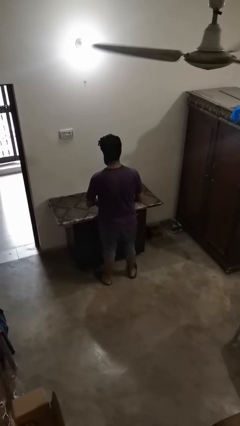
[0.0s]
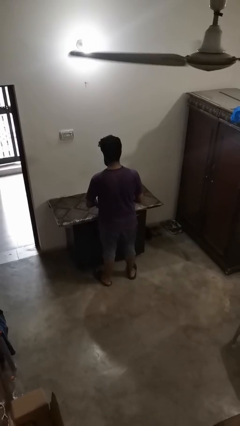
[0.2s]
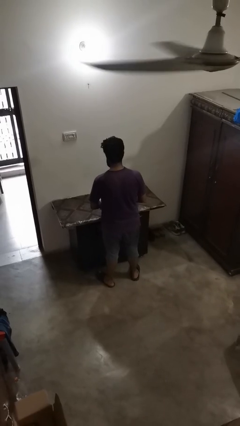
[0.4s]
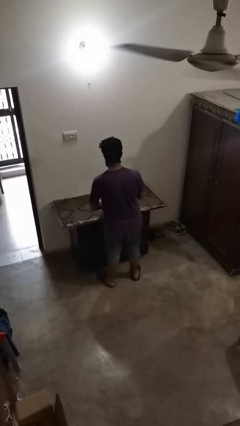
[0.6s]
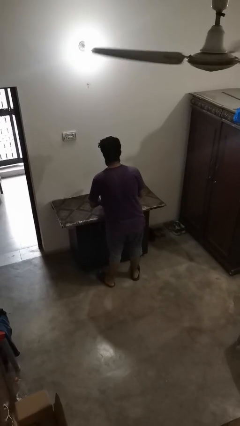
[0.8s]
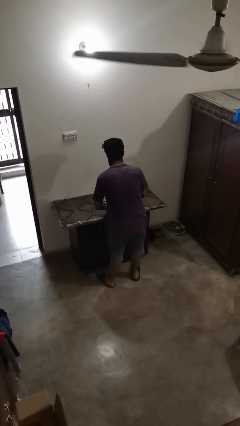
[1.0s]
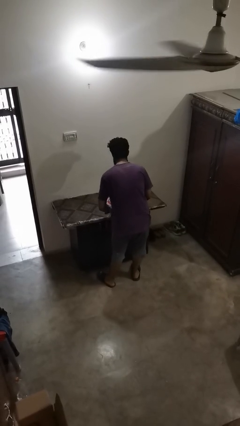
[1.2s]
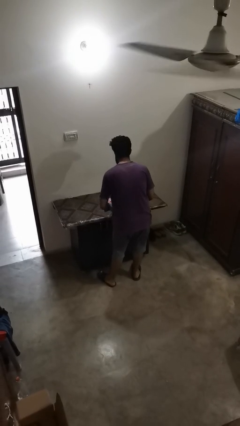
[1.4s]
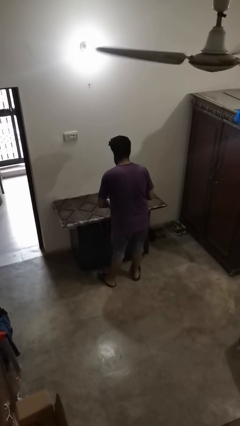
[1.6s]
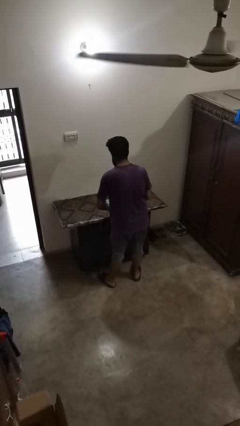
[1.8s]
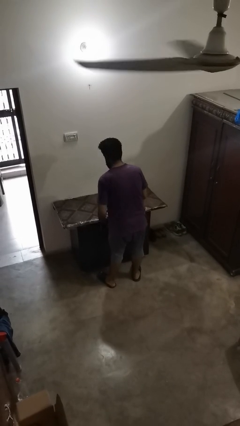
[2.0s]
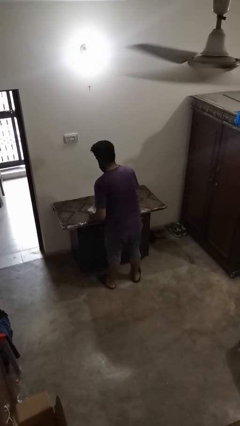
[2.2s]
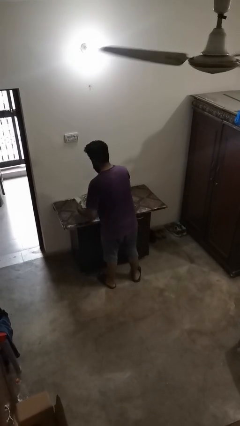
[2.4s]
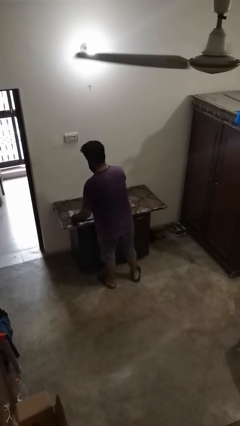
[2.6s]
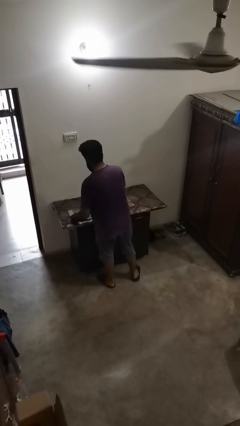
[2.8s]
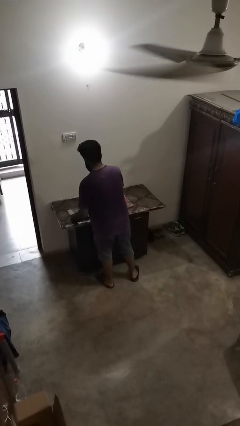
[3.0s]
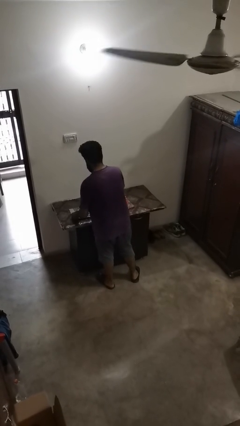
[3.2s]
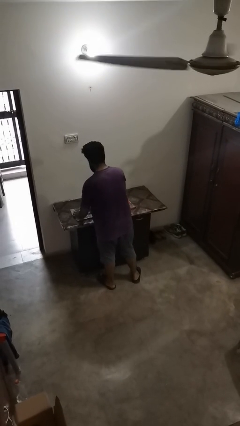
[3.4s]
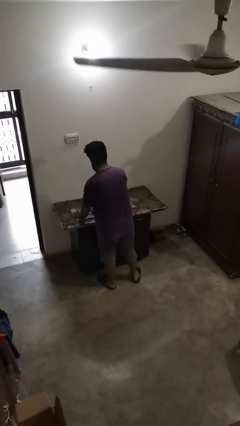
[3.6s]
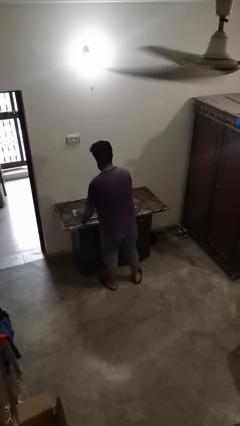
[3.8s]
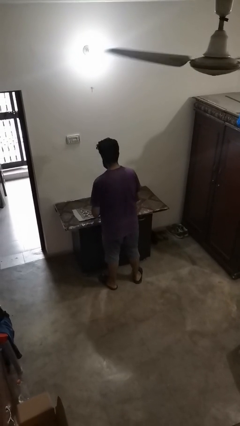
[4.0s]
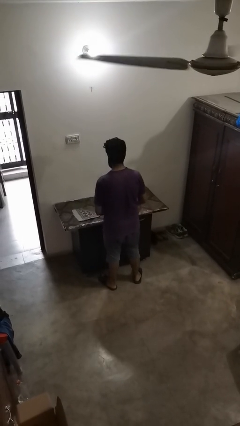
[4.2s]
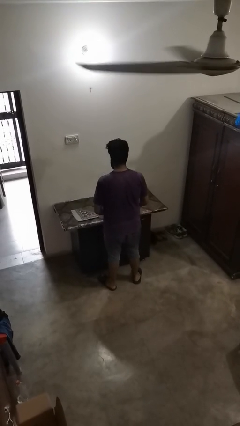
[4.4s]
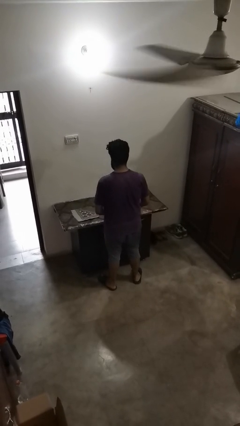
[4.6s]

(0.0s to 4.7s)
person spreads tablecloth

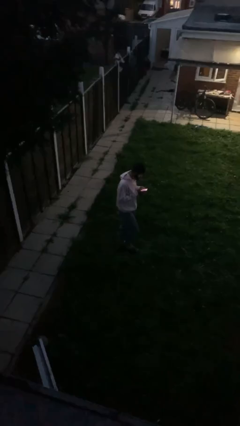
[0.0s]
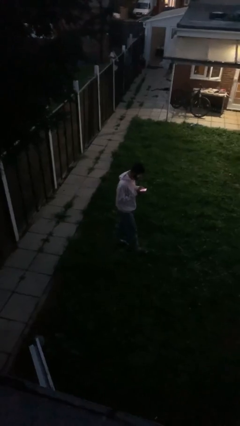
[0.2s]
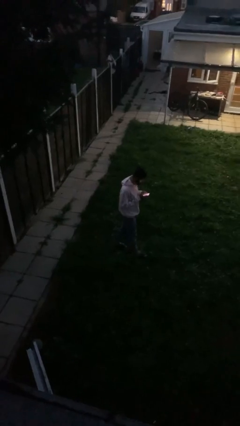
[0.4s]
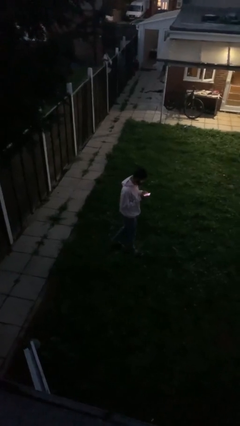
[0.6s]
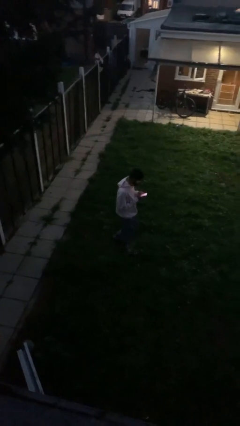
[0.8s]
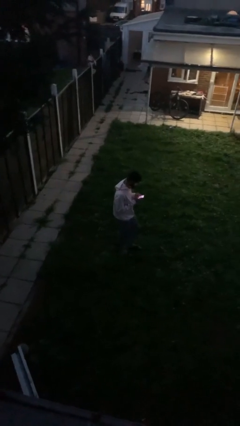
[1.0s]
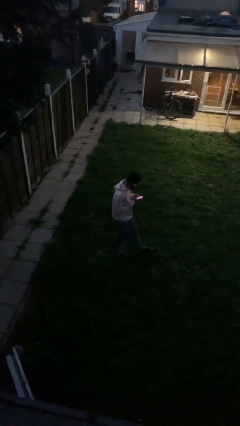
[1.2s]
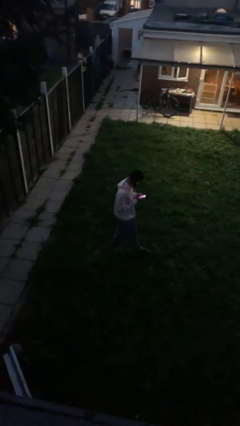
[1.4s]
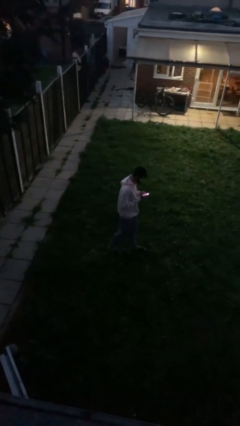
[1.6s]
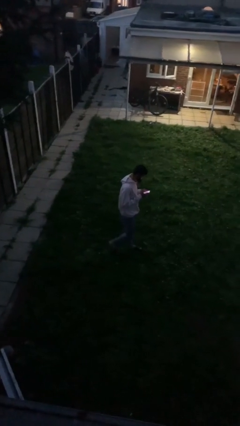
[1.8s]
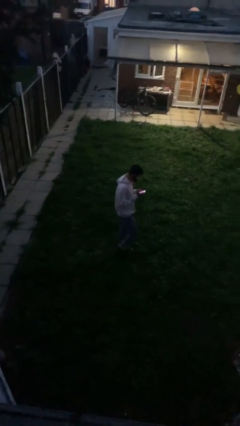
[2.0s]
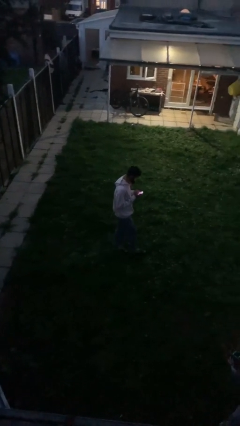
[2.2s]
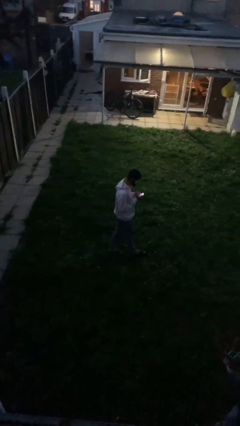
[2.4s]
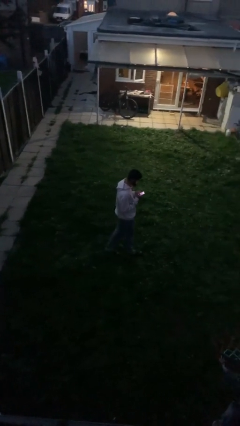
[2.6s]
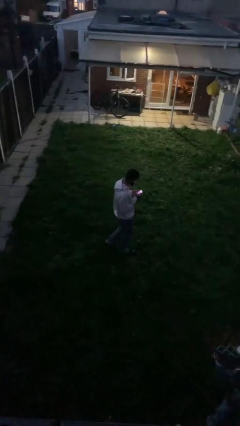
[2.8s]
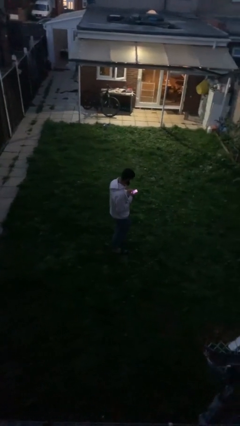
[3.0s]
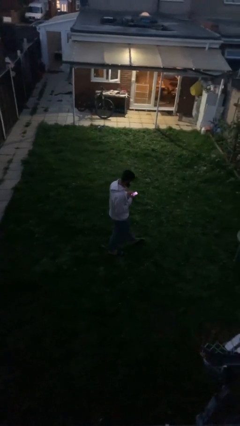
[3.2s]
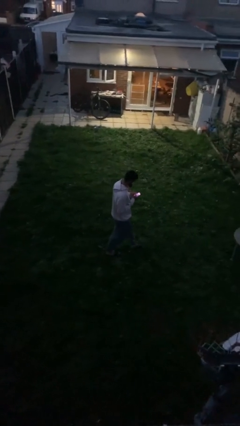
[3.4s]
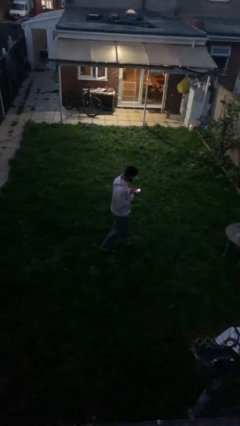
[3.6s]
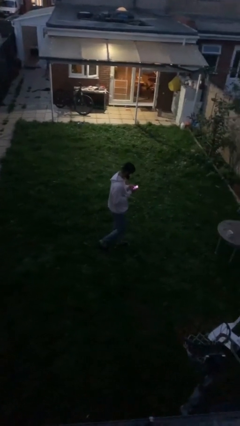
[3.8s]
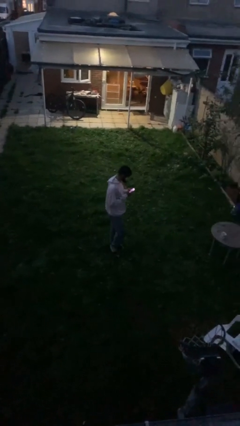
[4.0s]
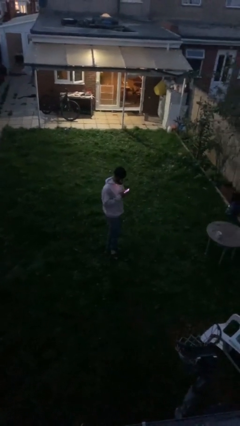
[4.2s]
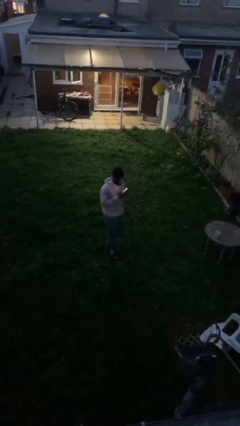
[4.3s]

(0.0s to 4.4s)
person texts on phone

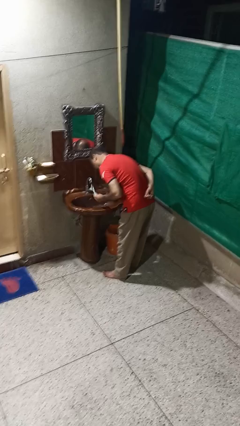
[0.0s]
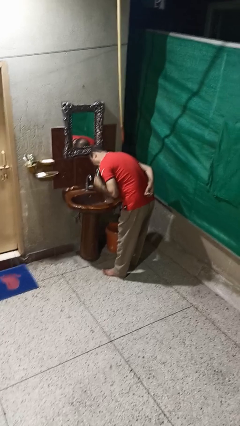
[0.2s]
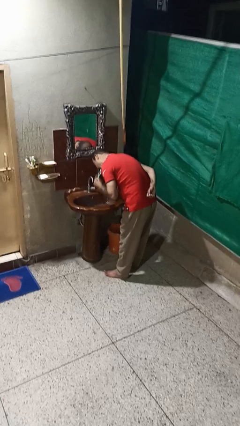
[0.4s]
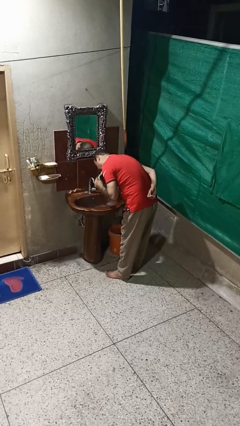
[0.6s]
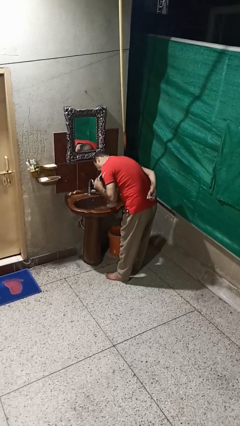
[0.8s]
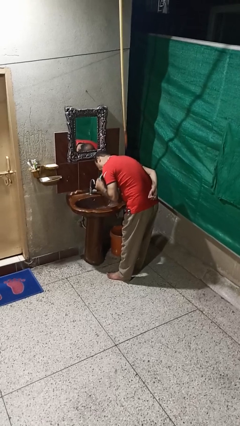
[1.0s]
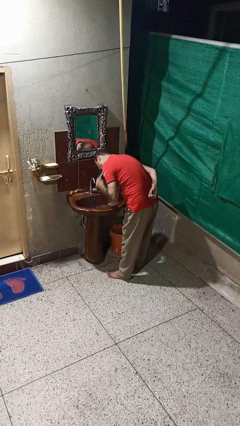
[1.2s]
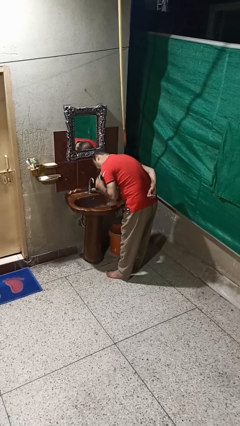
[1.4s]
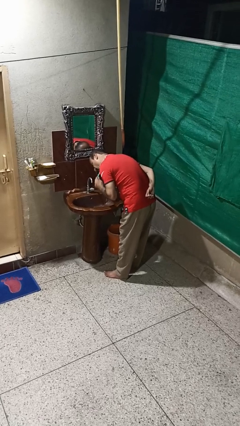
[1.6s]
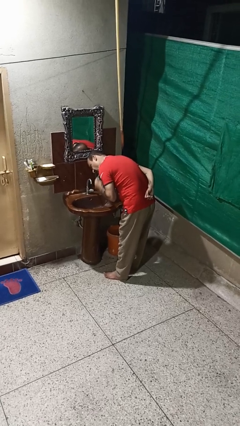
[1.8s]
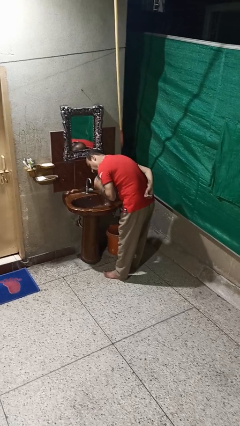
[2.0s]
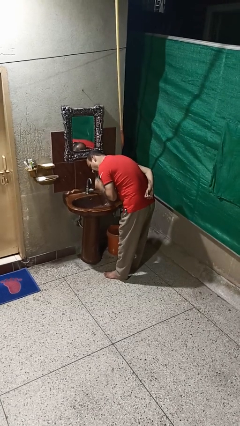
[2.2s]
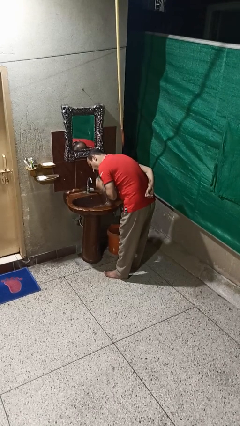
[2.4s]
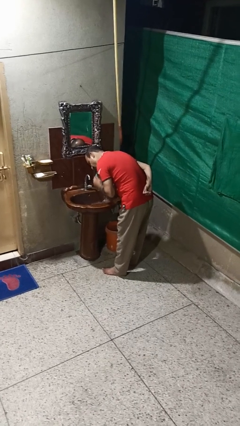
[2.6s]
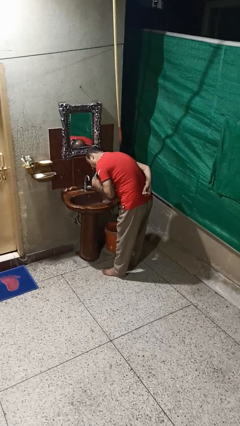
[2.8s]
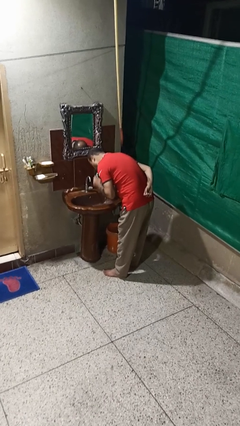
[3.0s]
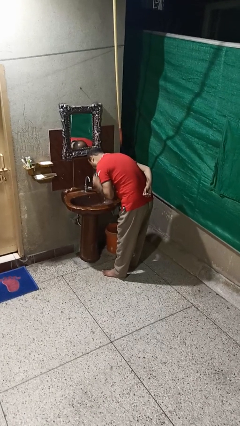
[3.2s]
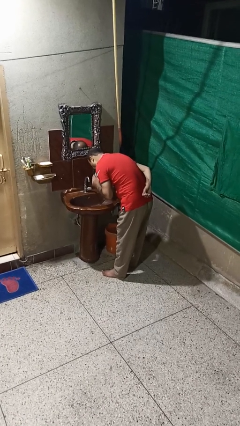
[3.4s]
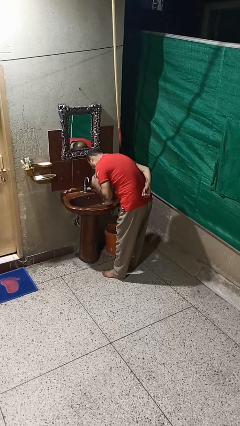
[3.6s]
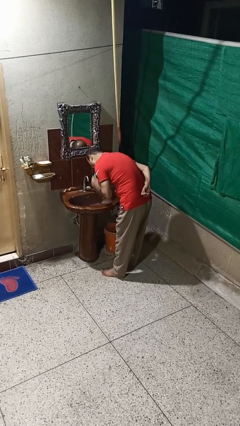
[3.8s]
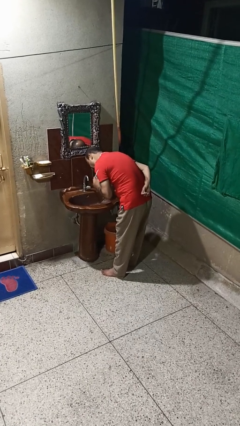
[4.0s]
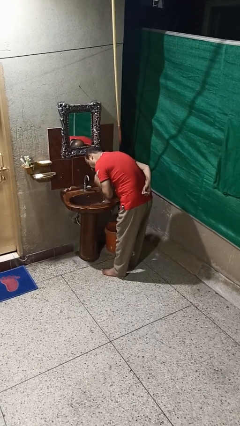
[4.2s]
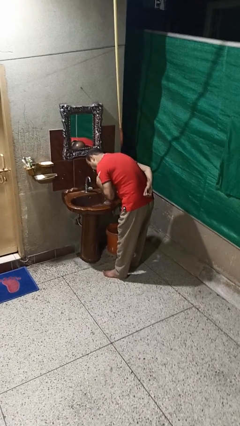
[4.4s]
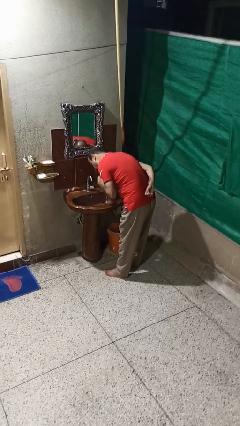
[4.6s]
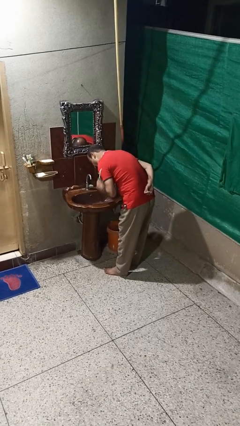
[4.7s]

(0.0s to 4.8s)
person brushes teeth

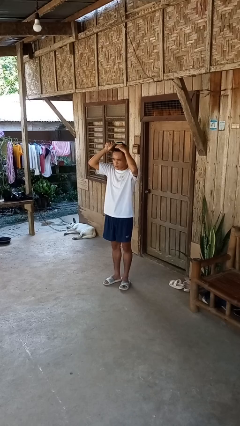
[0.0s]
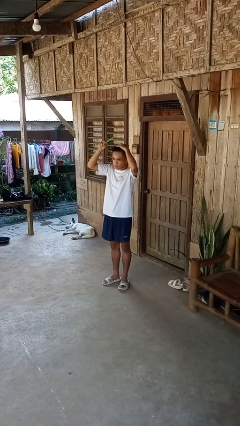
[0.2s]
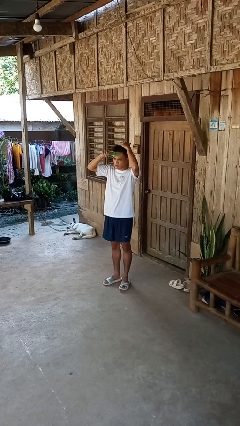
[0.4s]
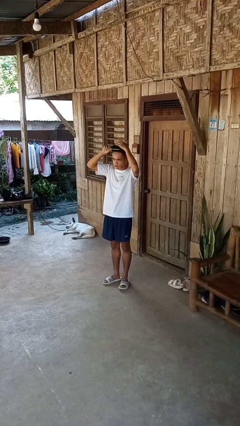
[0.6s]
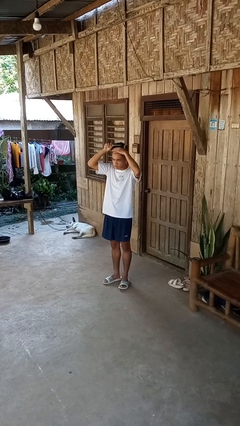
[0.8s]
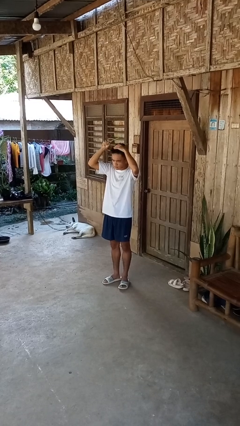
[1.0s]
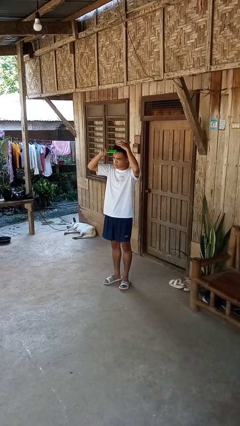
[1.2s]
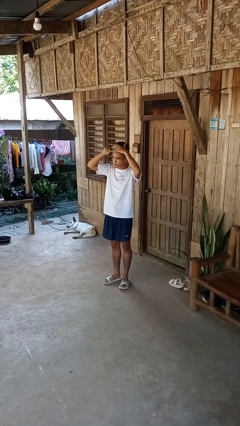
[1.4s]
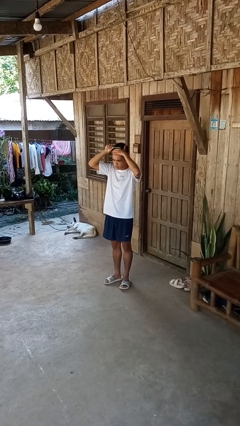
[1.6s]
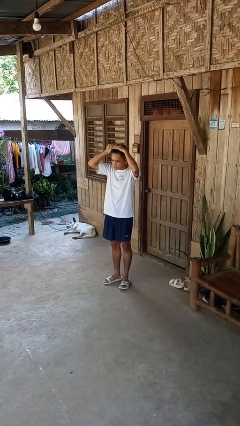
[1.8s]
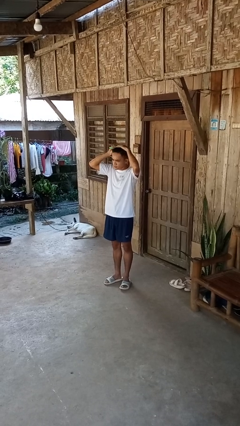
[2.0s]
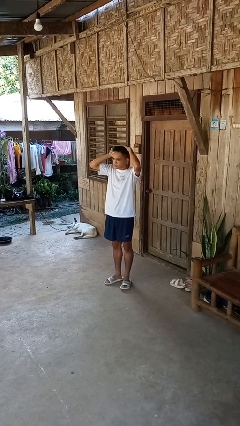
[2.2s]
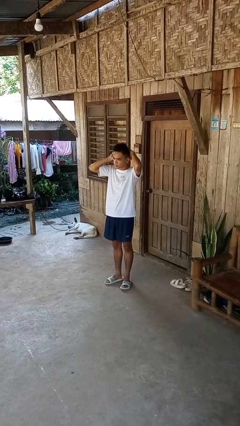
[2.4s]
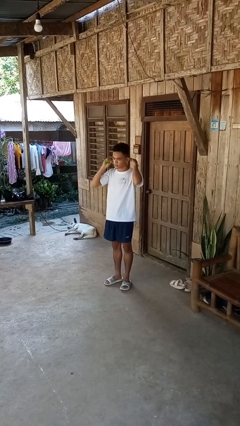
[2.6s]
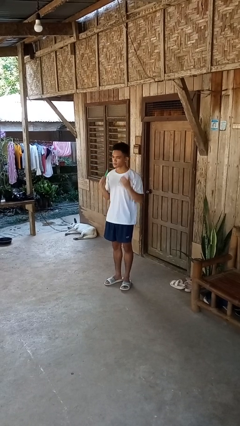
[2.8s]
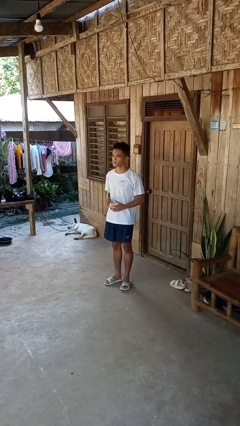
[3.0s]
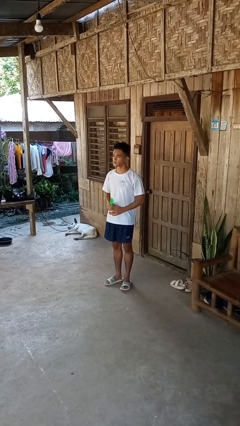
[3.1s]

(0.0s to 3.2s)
person brushes hair

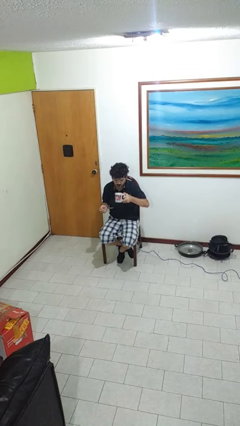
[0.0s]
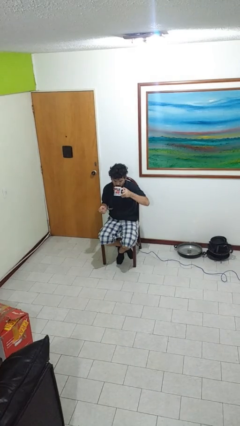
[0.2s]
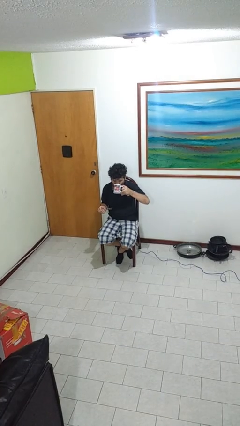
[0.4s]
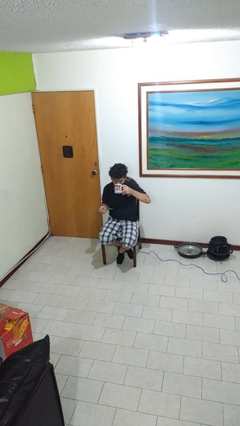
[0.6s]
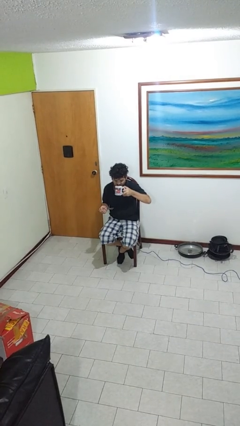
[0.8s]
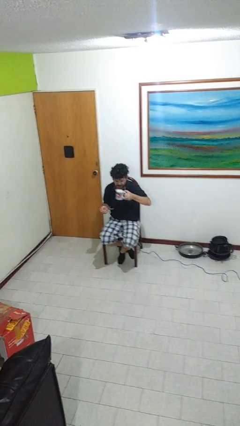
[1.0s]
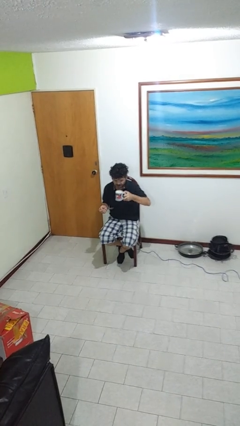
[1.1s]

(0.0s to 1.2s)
person drinks from mug
